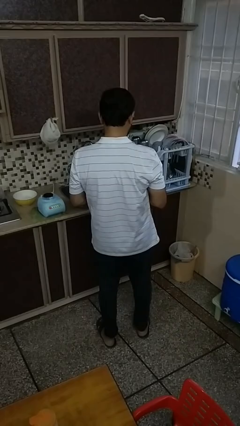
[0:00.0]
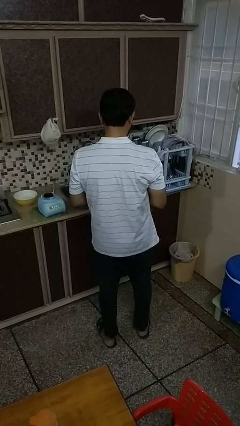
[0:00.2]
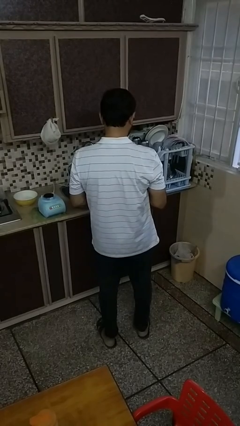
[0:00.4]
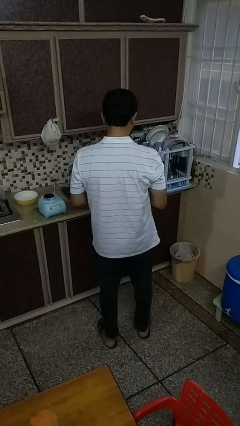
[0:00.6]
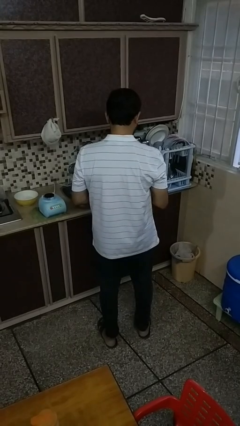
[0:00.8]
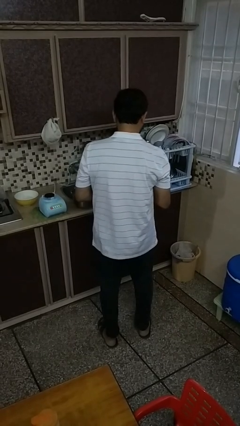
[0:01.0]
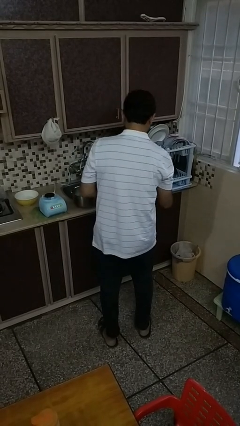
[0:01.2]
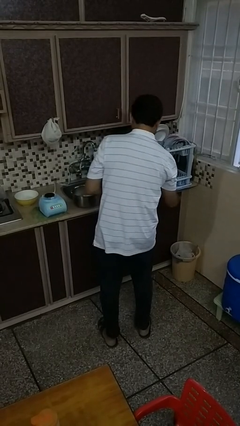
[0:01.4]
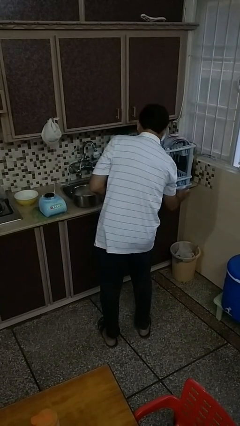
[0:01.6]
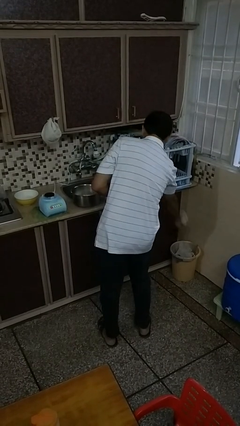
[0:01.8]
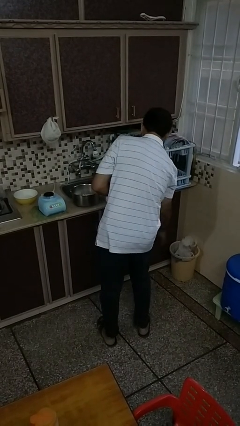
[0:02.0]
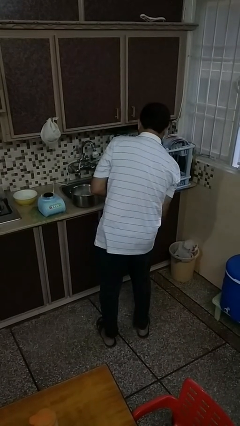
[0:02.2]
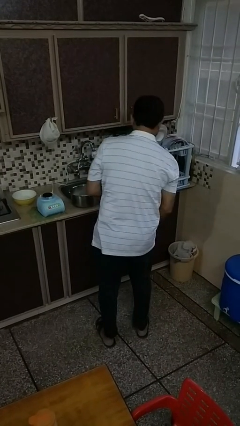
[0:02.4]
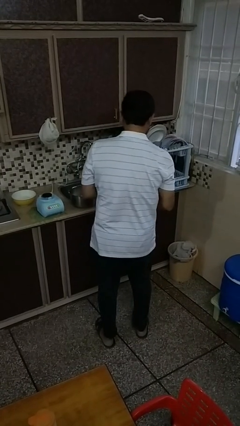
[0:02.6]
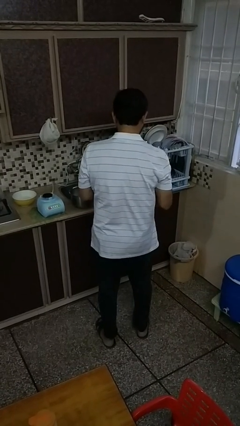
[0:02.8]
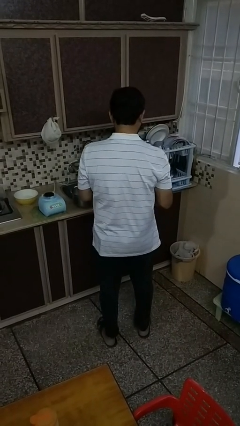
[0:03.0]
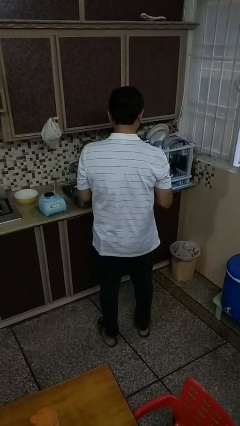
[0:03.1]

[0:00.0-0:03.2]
person discards trash

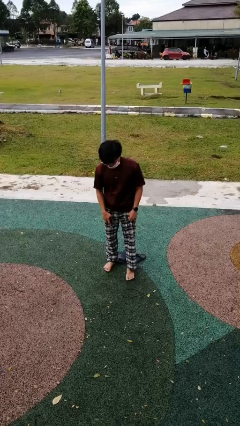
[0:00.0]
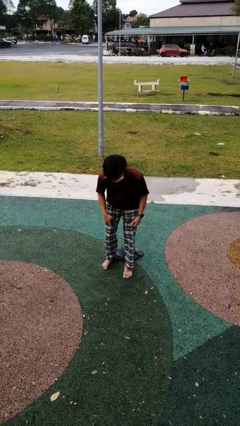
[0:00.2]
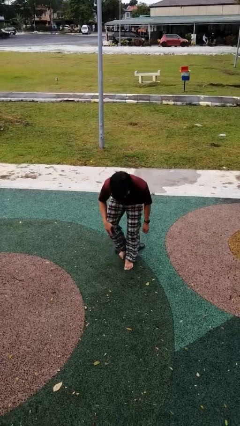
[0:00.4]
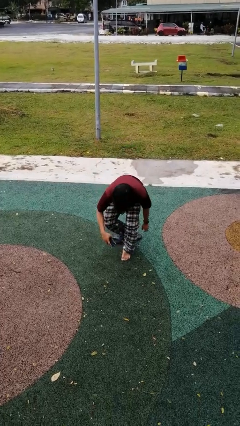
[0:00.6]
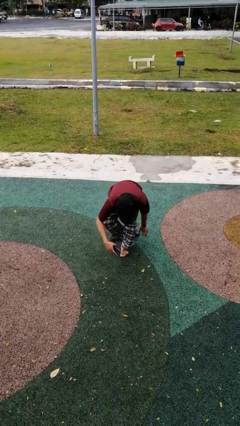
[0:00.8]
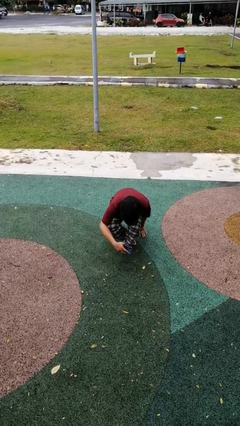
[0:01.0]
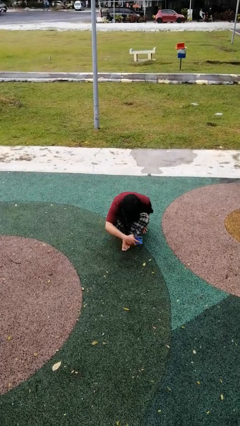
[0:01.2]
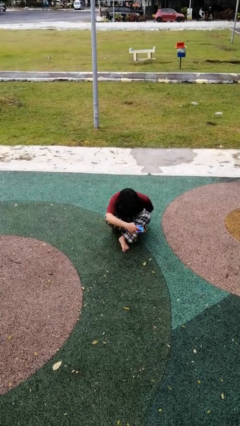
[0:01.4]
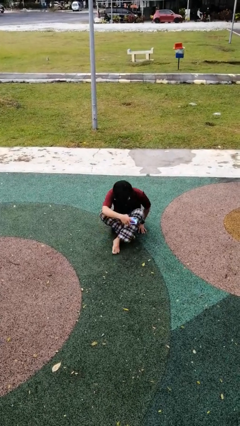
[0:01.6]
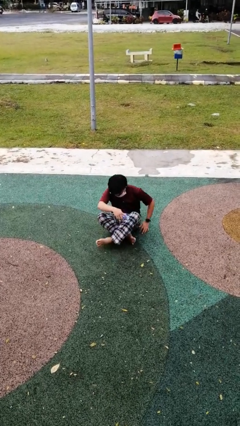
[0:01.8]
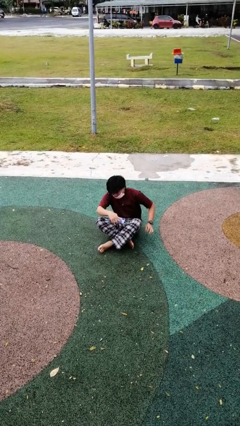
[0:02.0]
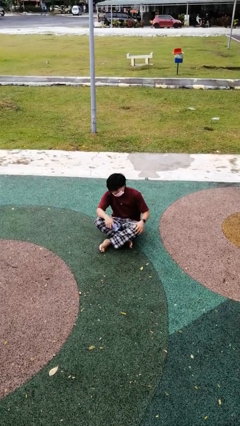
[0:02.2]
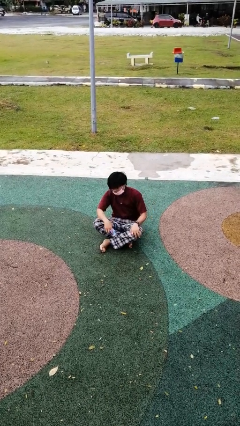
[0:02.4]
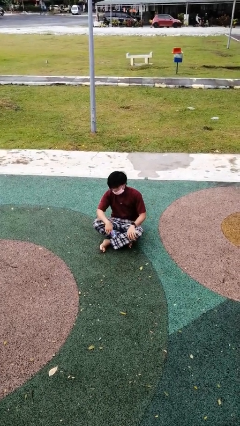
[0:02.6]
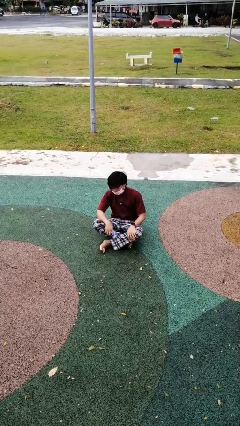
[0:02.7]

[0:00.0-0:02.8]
person sits crisscross

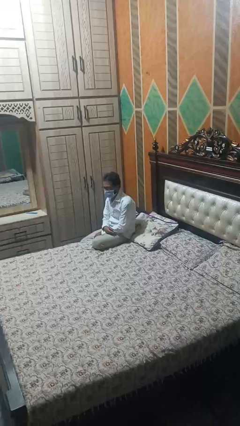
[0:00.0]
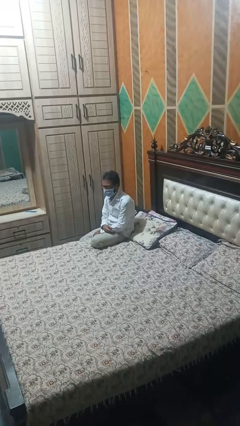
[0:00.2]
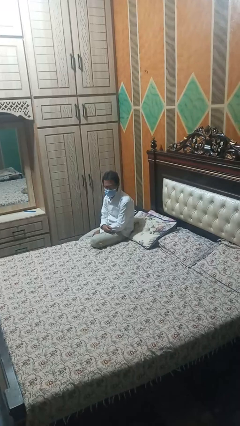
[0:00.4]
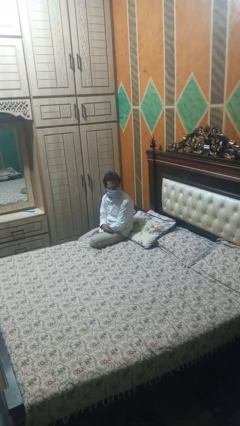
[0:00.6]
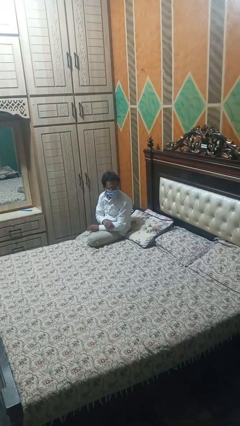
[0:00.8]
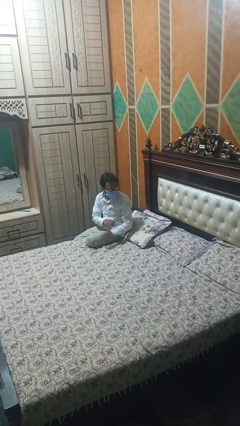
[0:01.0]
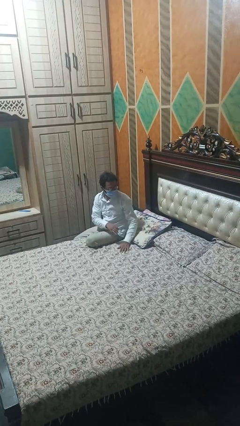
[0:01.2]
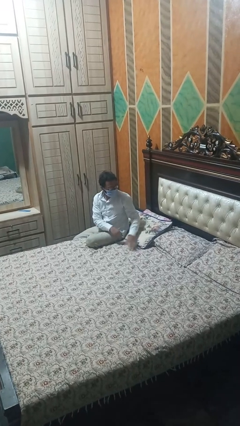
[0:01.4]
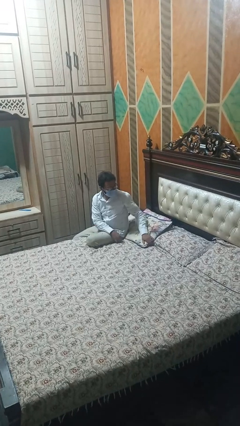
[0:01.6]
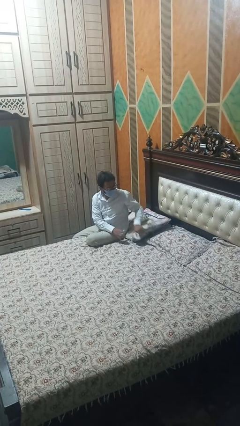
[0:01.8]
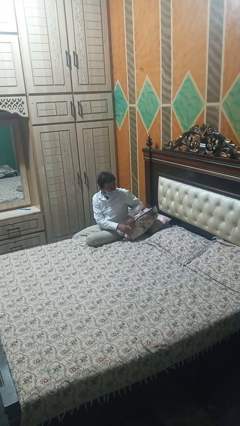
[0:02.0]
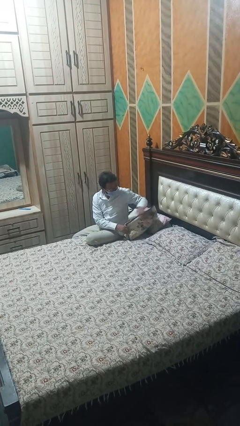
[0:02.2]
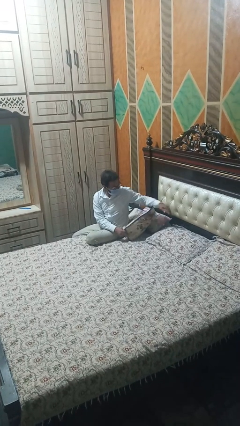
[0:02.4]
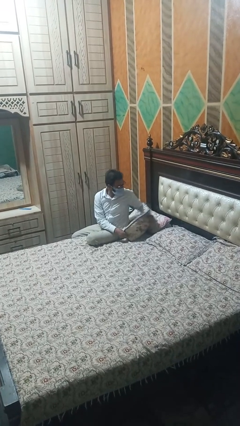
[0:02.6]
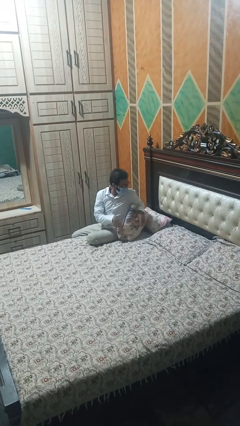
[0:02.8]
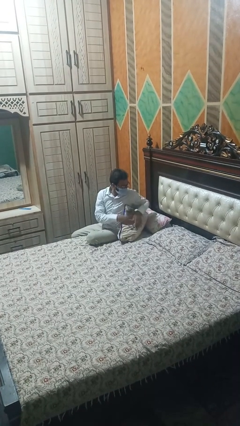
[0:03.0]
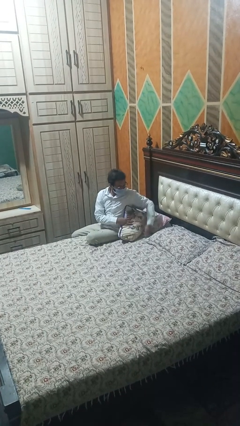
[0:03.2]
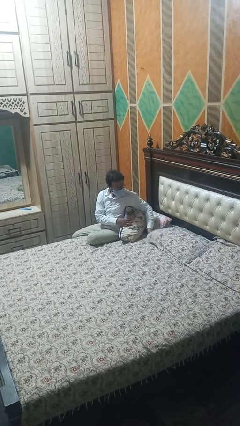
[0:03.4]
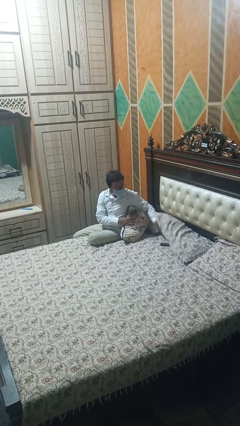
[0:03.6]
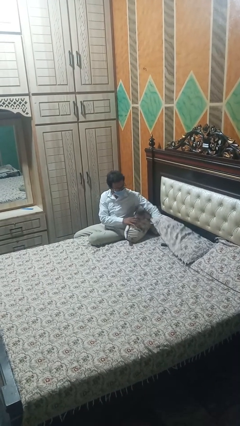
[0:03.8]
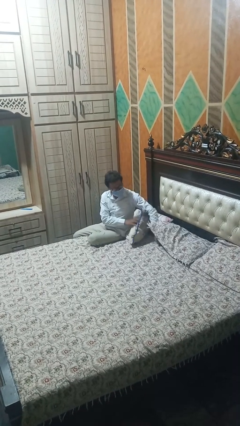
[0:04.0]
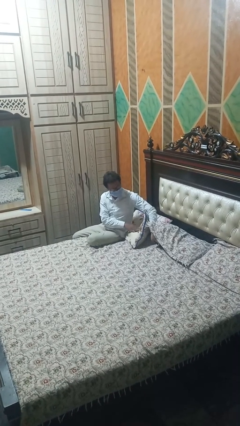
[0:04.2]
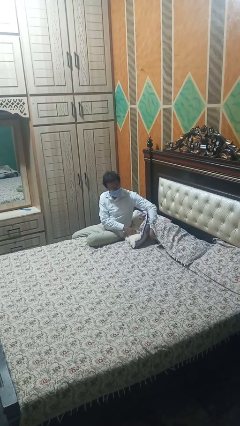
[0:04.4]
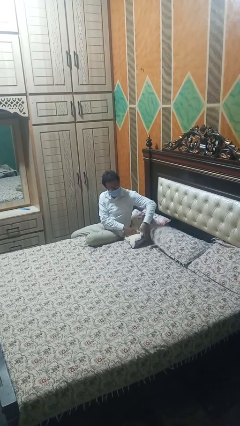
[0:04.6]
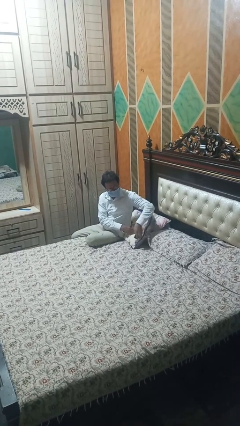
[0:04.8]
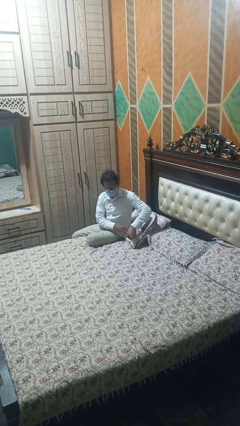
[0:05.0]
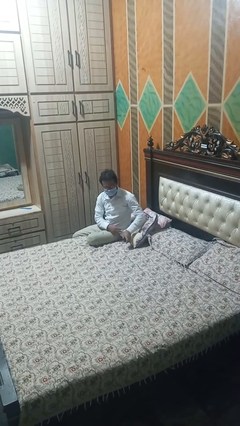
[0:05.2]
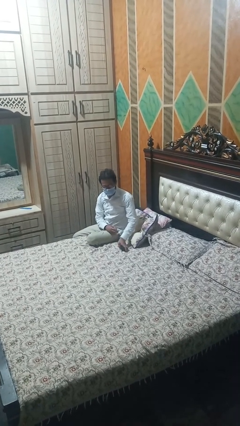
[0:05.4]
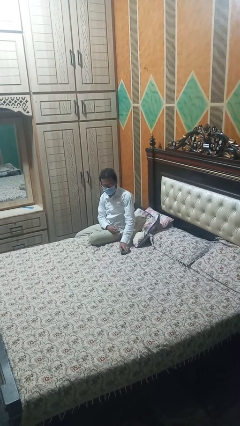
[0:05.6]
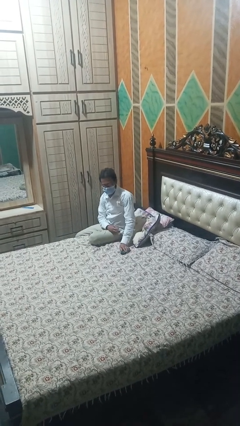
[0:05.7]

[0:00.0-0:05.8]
person searches under bed

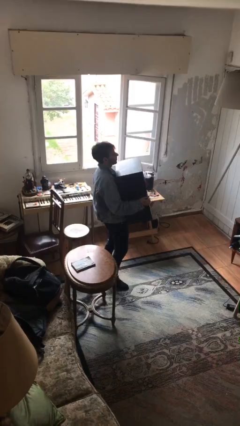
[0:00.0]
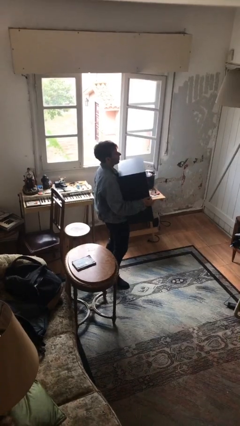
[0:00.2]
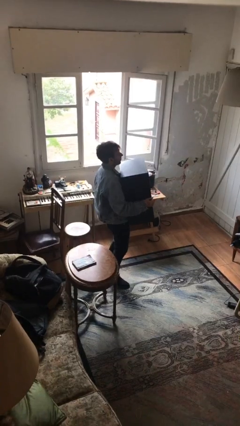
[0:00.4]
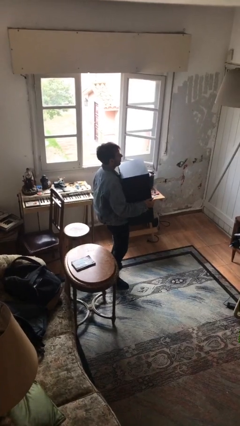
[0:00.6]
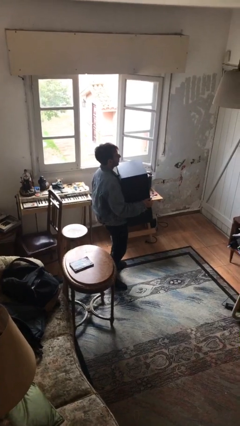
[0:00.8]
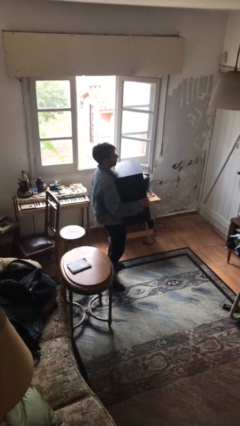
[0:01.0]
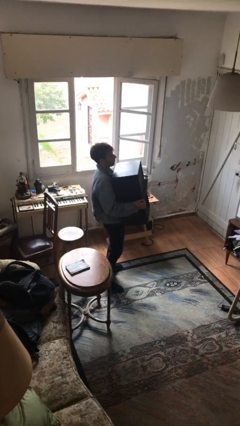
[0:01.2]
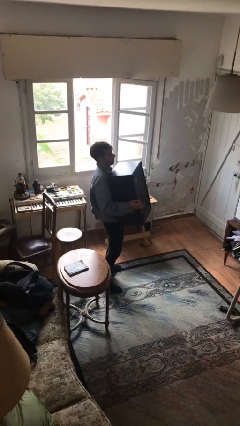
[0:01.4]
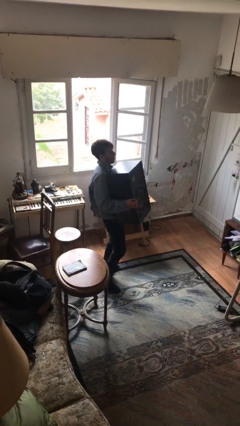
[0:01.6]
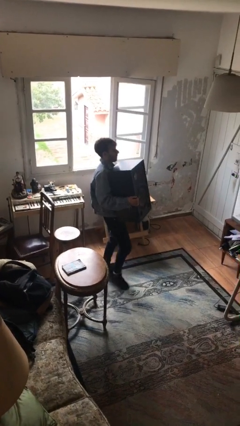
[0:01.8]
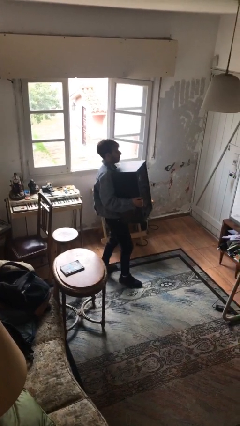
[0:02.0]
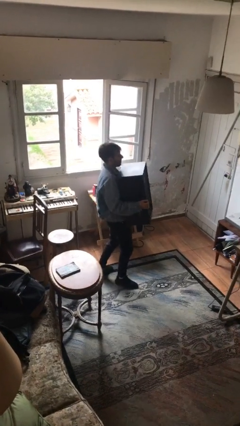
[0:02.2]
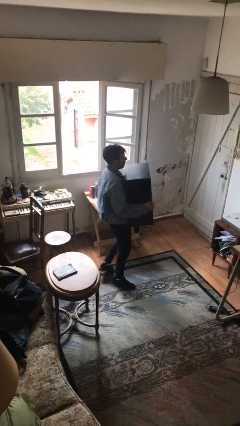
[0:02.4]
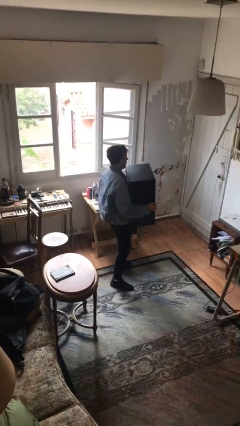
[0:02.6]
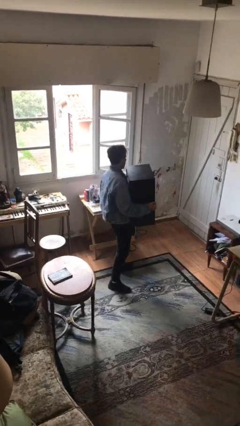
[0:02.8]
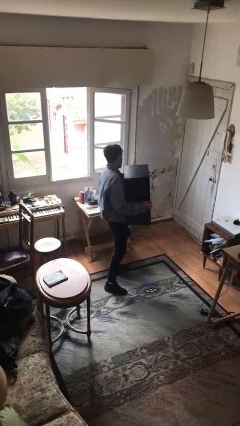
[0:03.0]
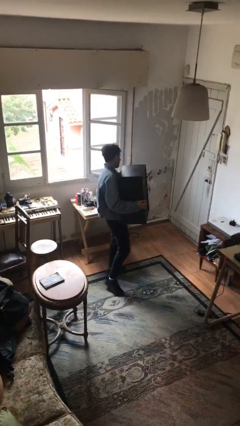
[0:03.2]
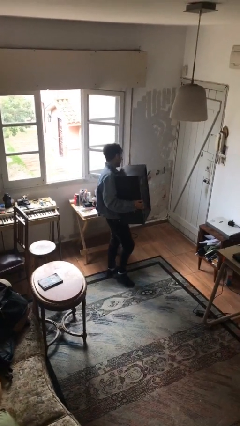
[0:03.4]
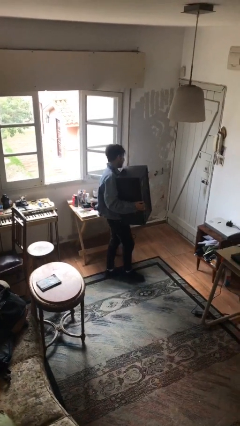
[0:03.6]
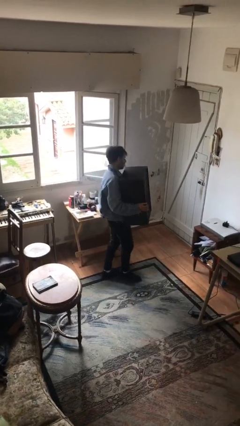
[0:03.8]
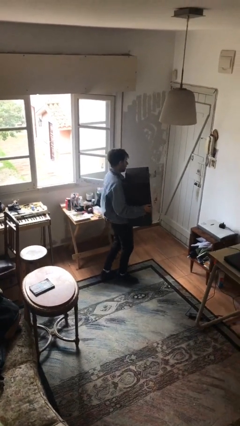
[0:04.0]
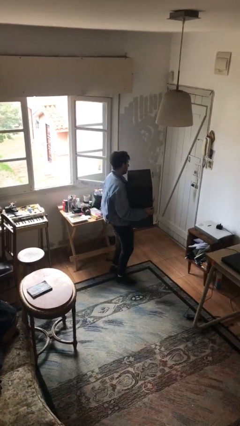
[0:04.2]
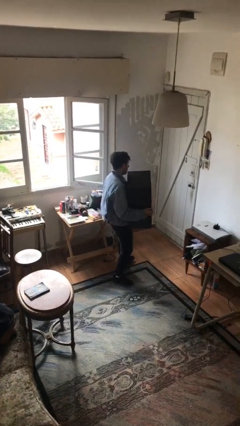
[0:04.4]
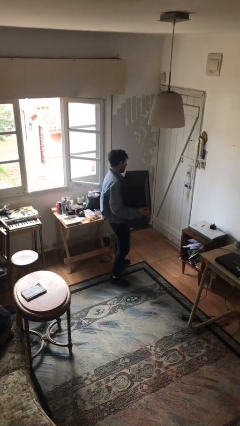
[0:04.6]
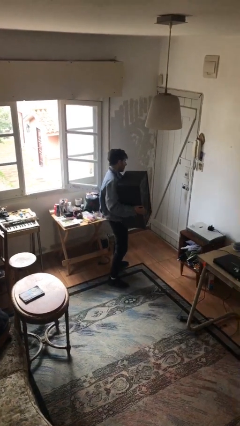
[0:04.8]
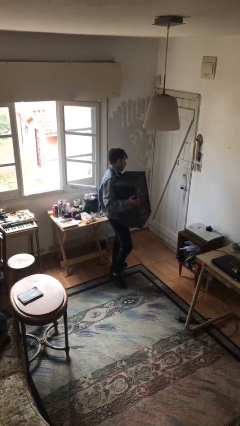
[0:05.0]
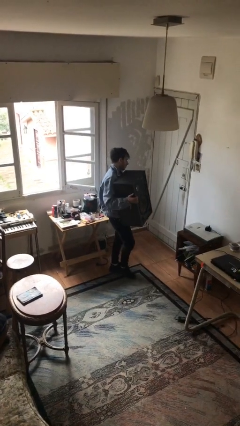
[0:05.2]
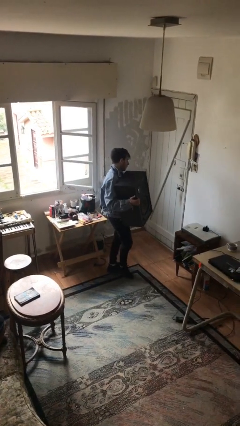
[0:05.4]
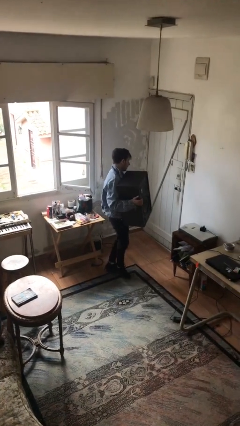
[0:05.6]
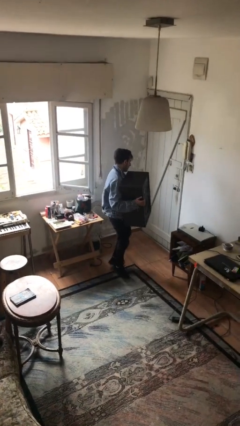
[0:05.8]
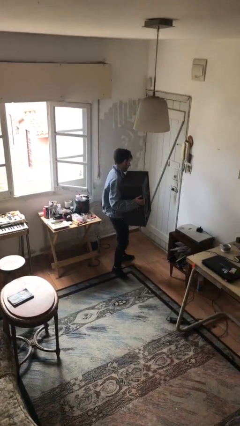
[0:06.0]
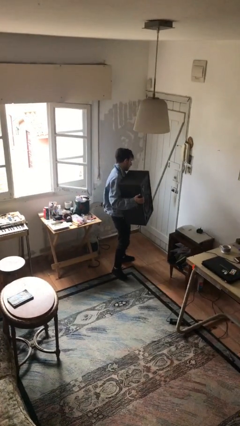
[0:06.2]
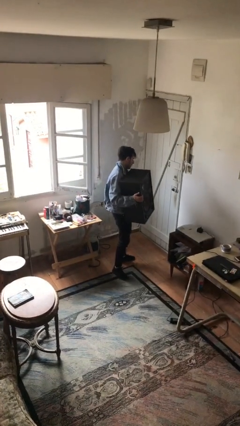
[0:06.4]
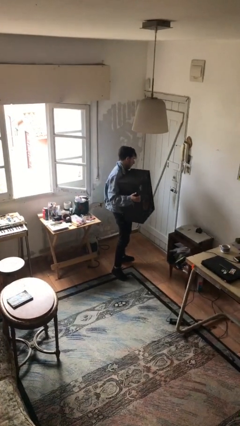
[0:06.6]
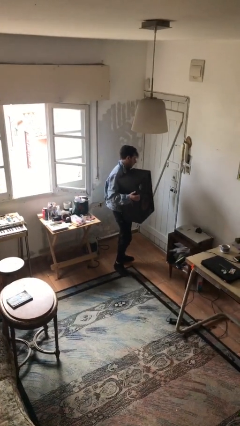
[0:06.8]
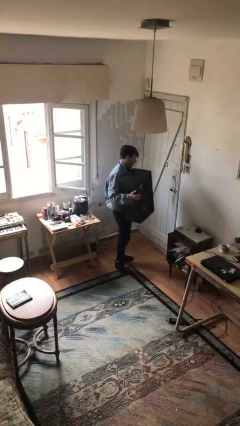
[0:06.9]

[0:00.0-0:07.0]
person carries heavy object
